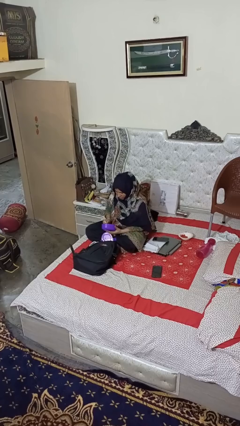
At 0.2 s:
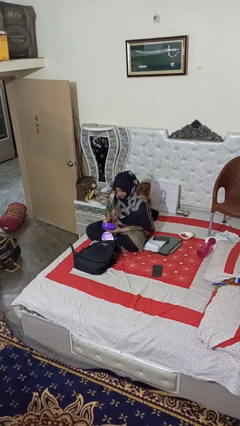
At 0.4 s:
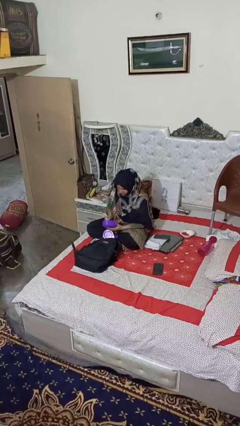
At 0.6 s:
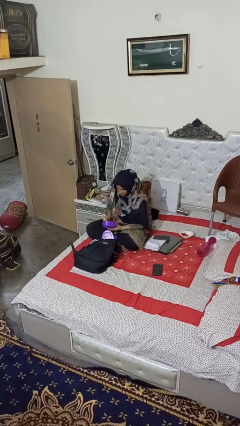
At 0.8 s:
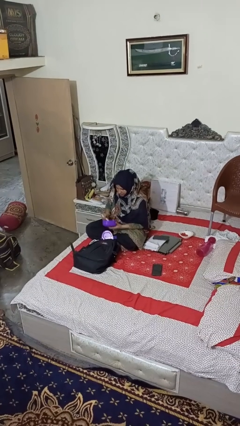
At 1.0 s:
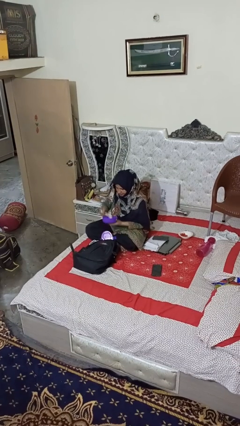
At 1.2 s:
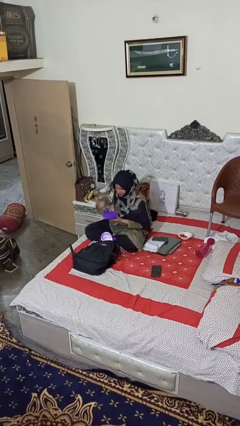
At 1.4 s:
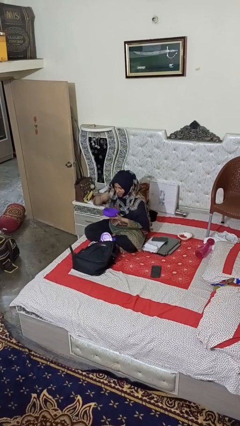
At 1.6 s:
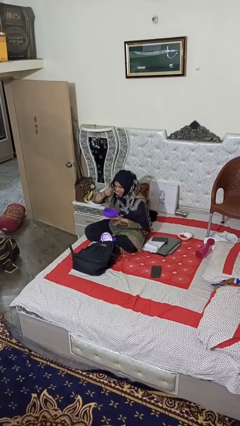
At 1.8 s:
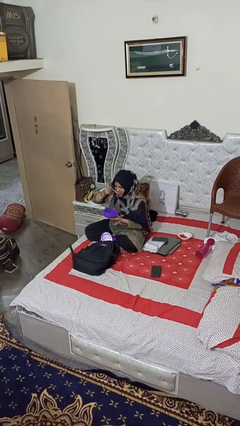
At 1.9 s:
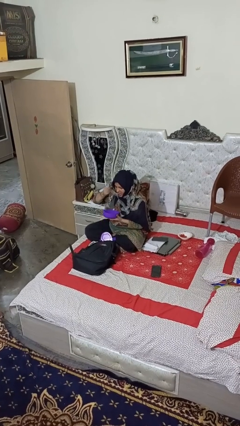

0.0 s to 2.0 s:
person eats snack from bag

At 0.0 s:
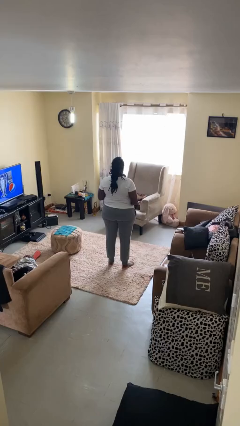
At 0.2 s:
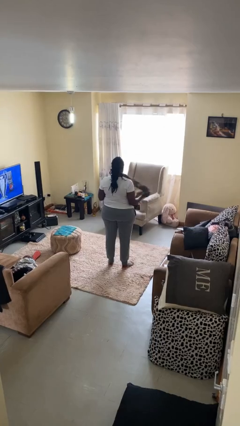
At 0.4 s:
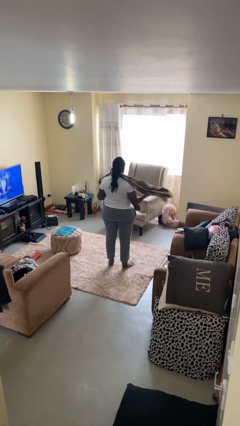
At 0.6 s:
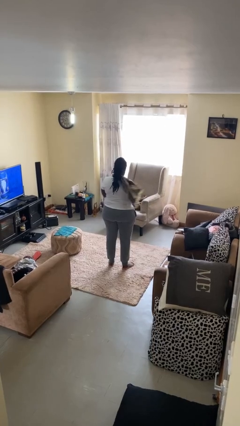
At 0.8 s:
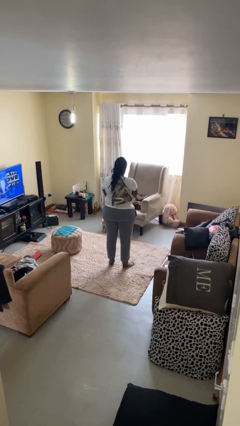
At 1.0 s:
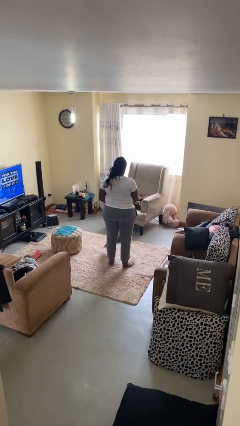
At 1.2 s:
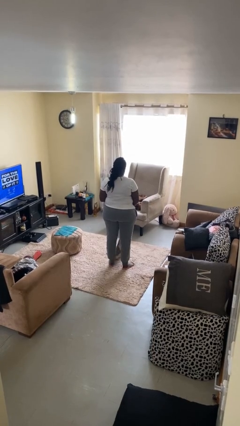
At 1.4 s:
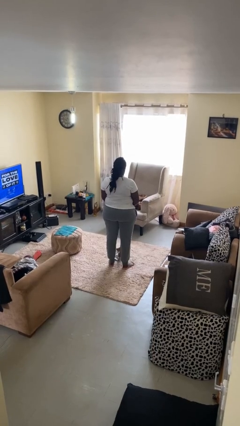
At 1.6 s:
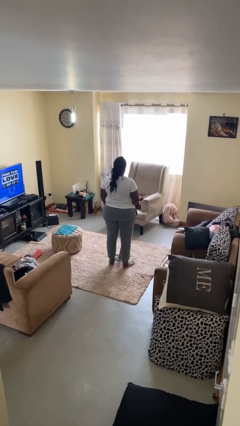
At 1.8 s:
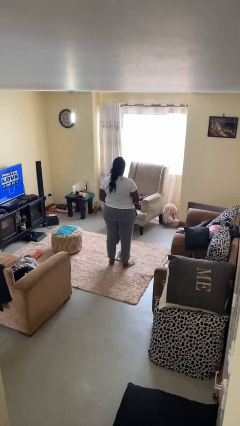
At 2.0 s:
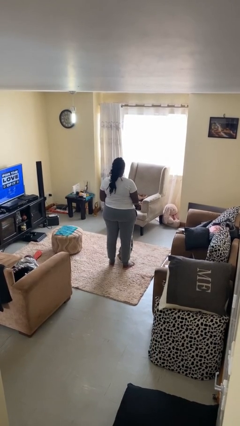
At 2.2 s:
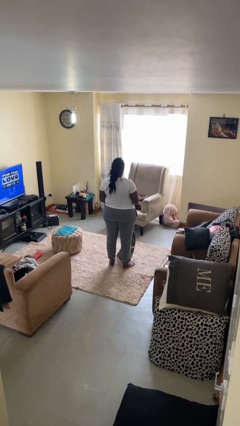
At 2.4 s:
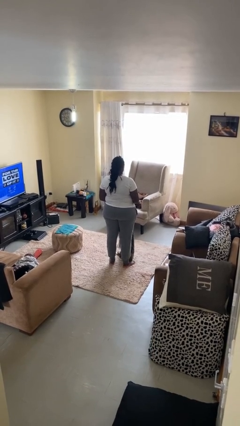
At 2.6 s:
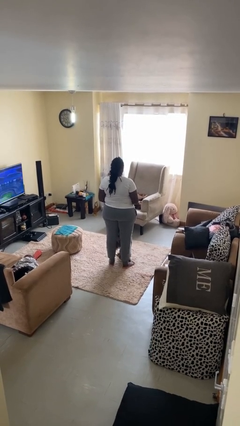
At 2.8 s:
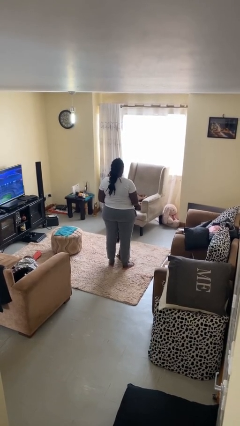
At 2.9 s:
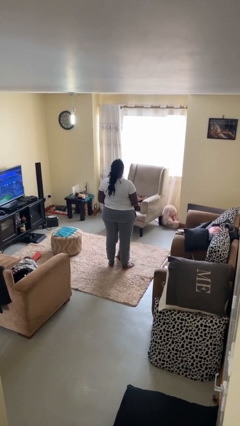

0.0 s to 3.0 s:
person takes off scarf

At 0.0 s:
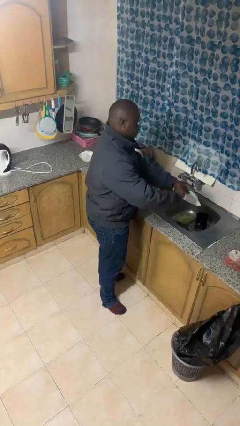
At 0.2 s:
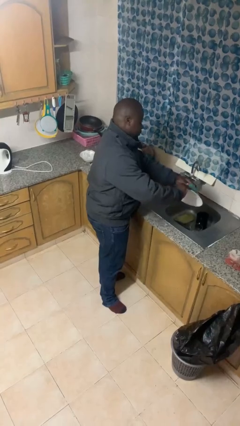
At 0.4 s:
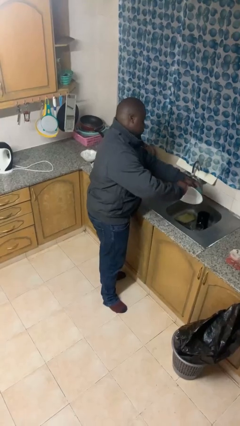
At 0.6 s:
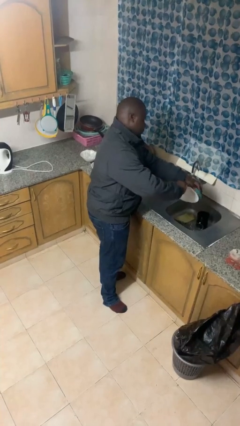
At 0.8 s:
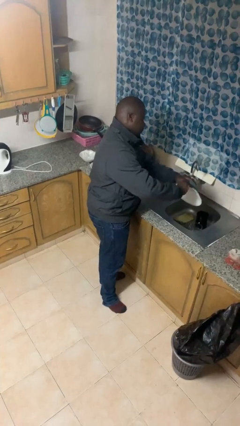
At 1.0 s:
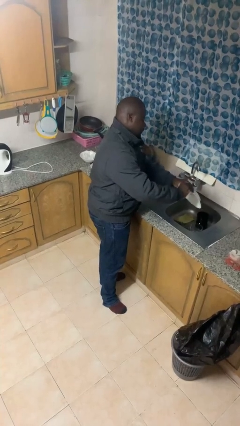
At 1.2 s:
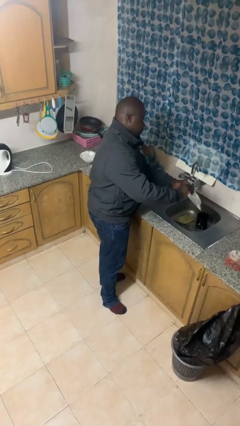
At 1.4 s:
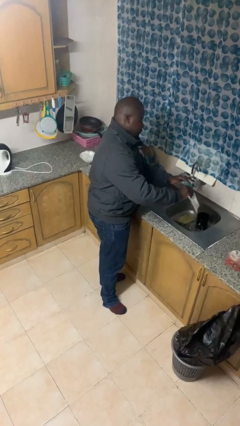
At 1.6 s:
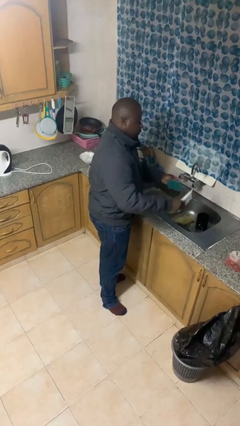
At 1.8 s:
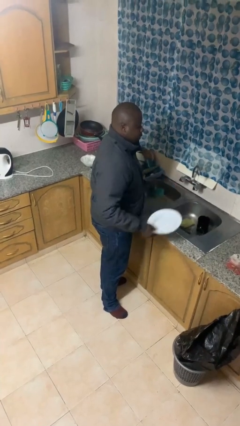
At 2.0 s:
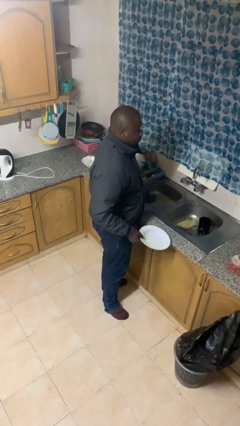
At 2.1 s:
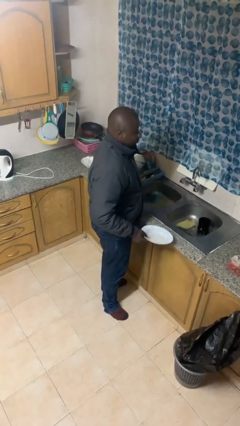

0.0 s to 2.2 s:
person washes dish

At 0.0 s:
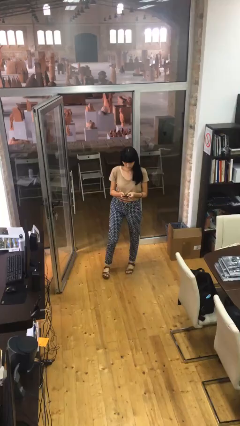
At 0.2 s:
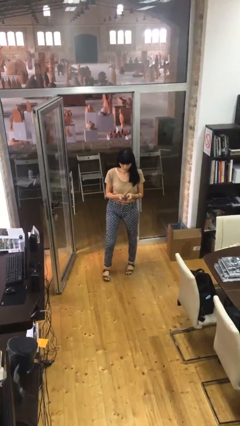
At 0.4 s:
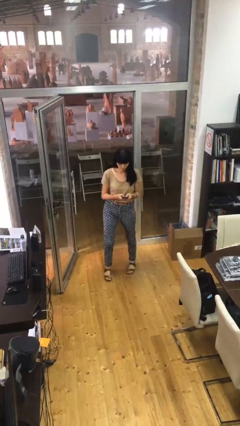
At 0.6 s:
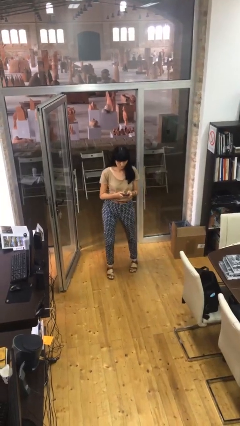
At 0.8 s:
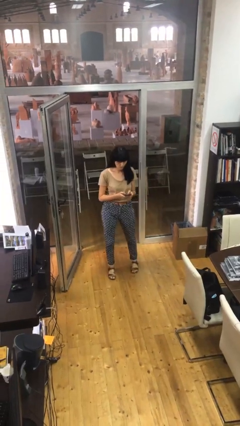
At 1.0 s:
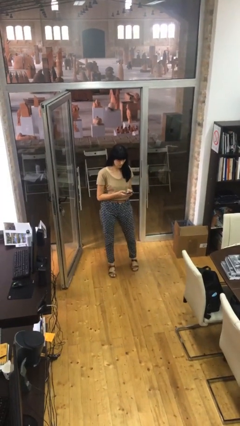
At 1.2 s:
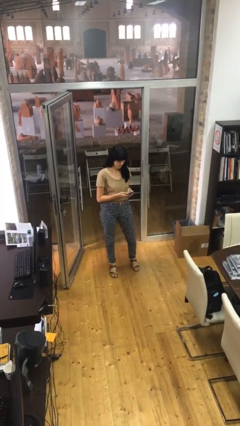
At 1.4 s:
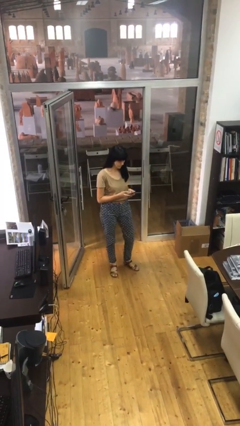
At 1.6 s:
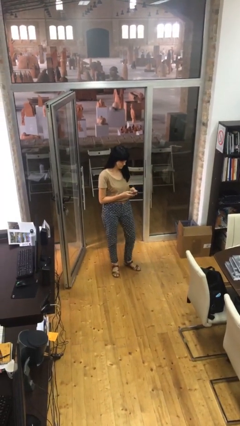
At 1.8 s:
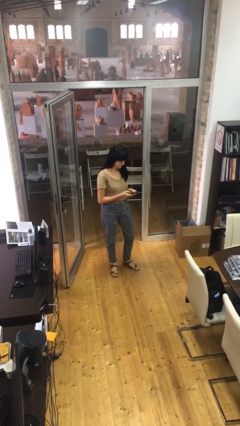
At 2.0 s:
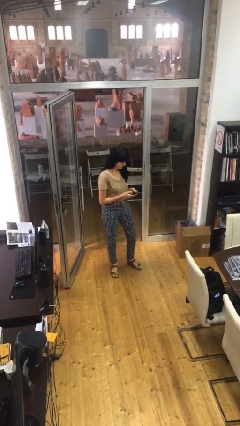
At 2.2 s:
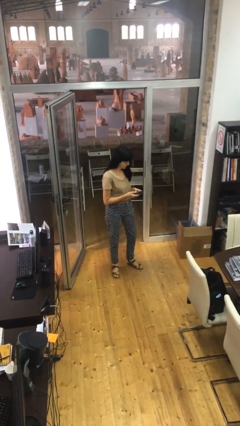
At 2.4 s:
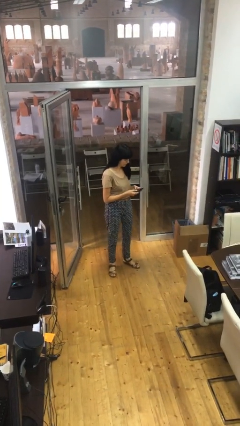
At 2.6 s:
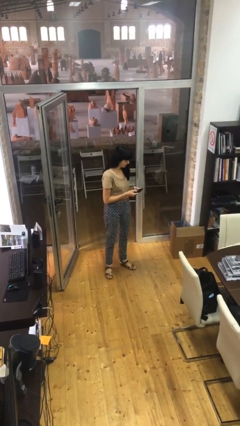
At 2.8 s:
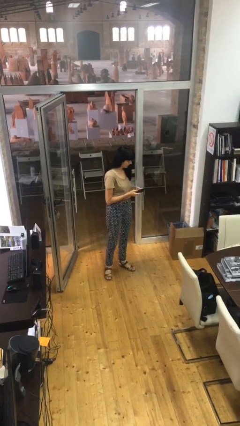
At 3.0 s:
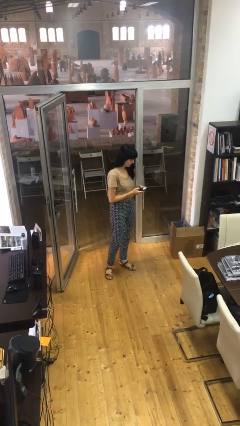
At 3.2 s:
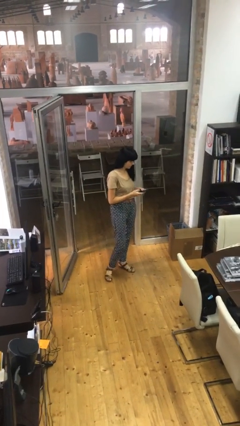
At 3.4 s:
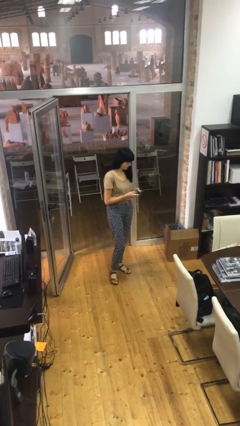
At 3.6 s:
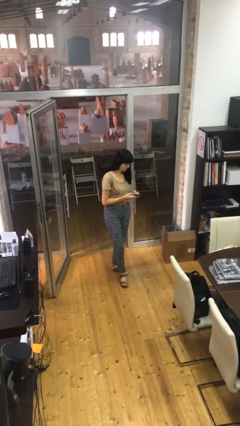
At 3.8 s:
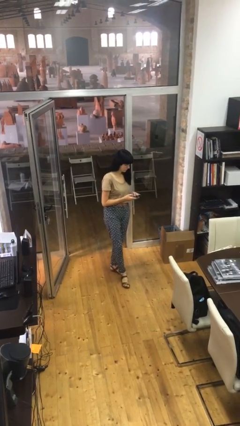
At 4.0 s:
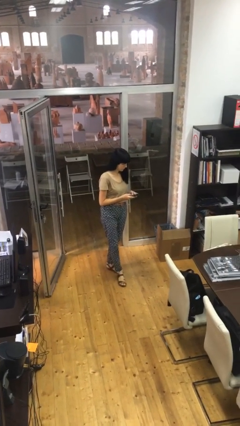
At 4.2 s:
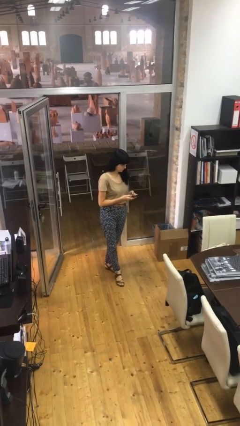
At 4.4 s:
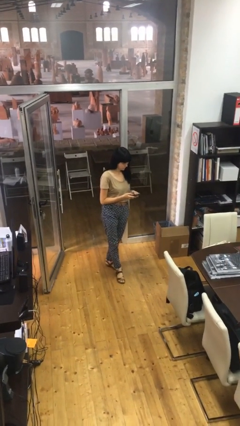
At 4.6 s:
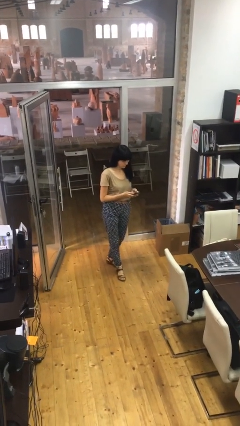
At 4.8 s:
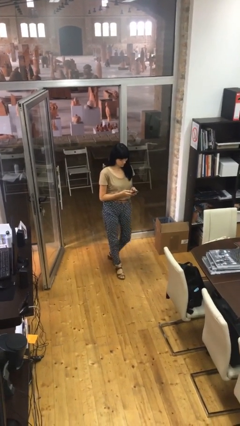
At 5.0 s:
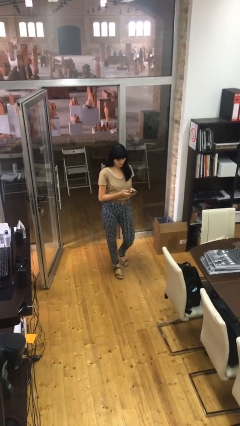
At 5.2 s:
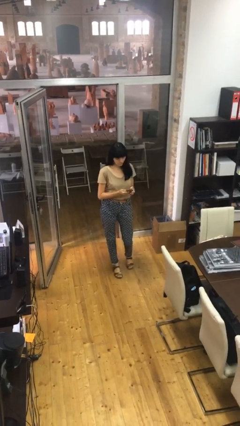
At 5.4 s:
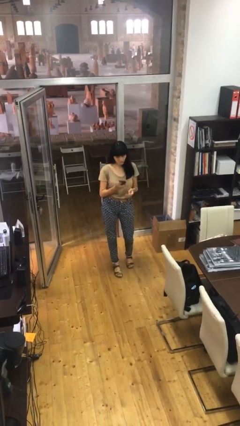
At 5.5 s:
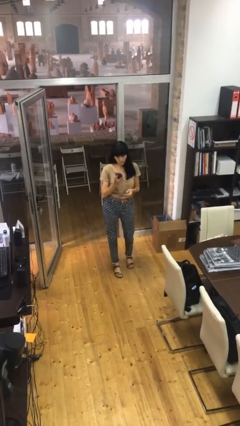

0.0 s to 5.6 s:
person texts on phone

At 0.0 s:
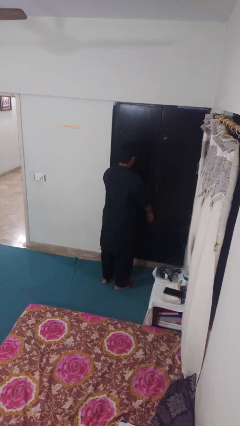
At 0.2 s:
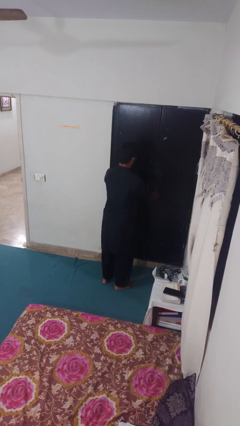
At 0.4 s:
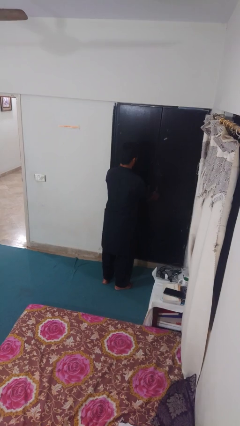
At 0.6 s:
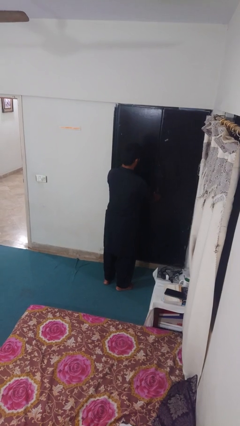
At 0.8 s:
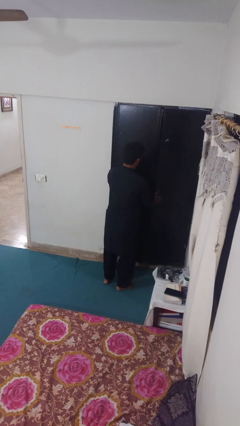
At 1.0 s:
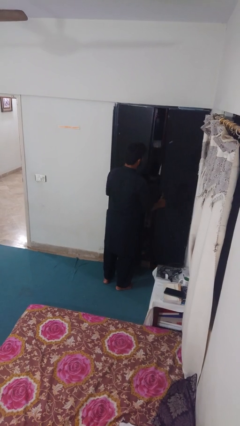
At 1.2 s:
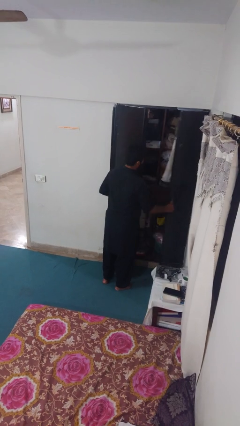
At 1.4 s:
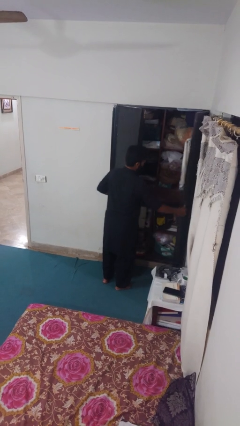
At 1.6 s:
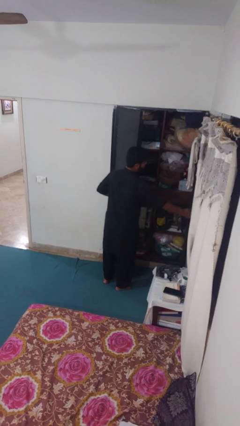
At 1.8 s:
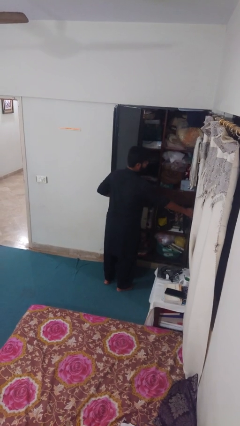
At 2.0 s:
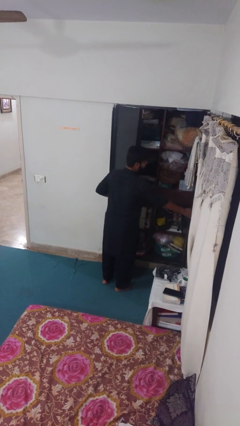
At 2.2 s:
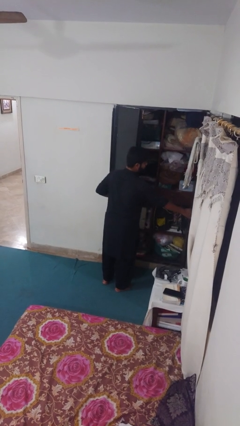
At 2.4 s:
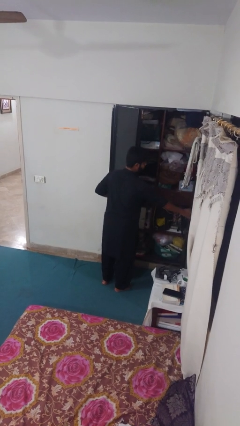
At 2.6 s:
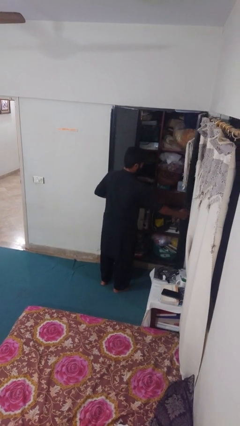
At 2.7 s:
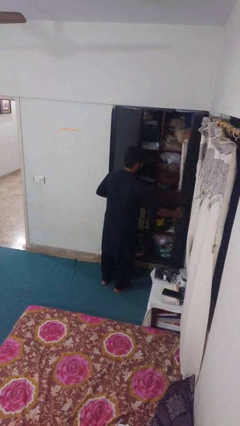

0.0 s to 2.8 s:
person opens closet door

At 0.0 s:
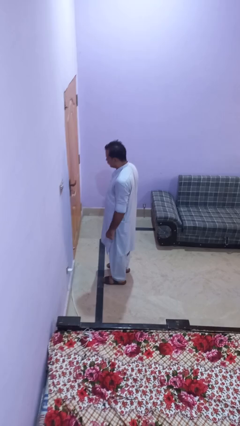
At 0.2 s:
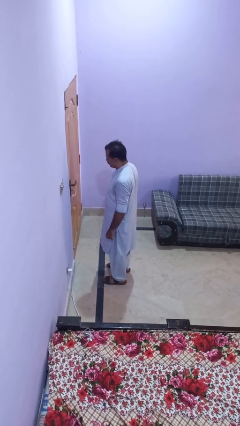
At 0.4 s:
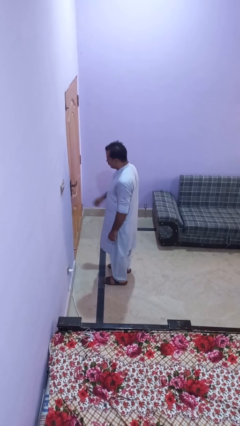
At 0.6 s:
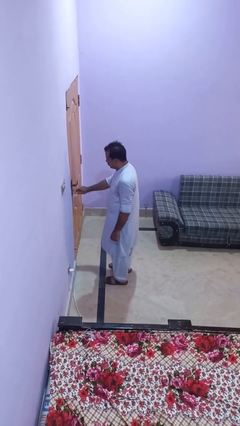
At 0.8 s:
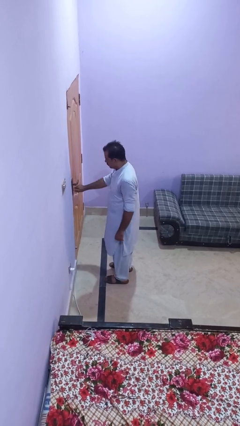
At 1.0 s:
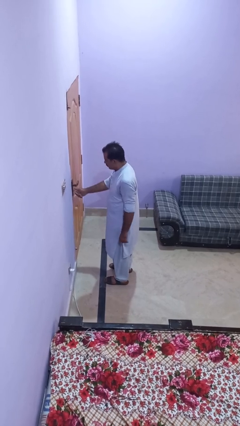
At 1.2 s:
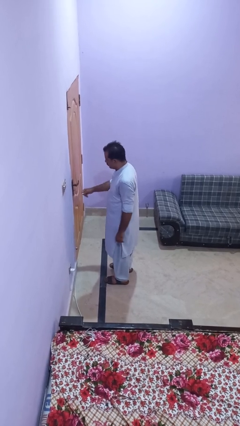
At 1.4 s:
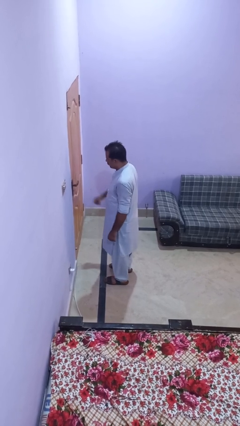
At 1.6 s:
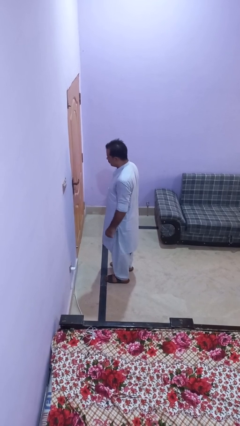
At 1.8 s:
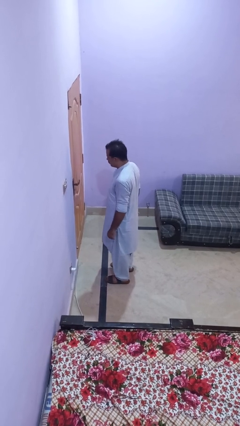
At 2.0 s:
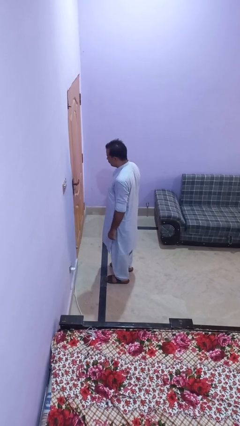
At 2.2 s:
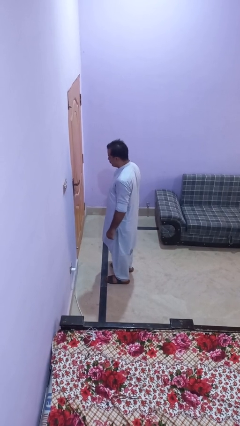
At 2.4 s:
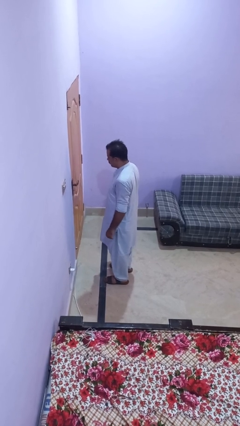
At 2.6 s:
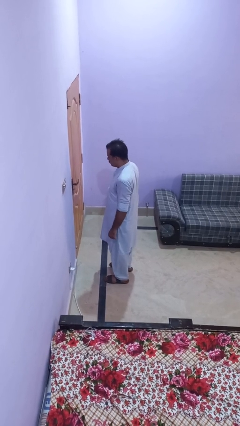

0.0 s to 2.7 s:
person unlocks door with keys
